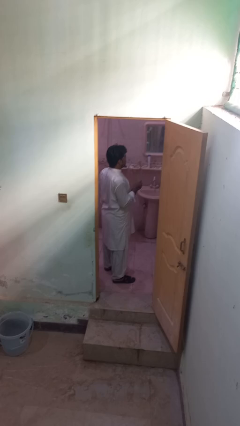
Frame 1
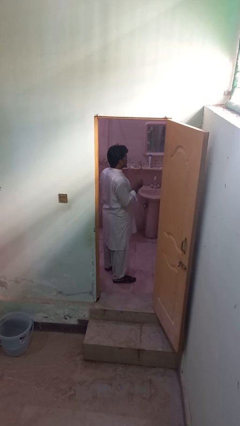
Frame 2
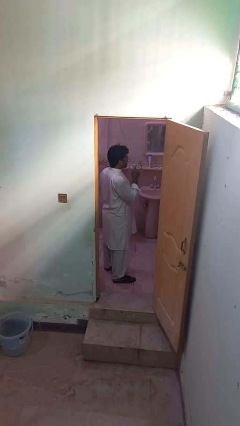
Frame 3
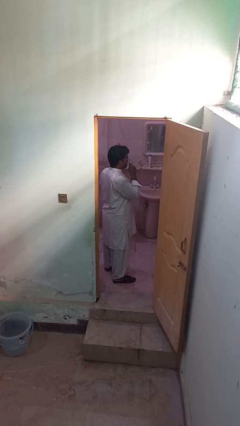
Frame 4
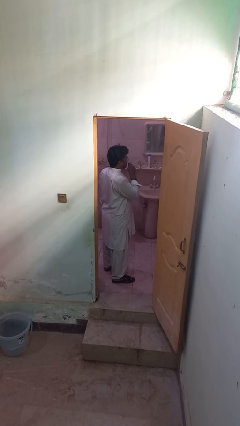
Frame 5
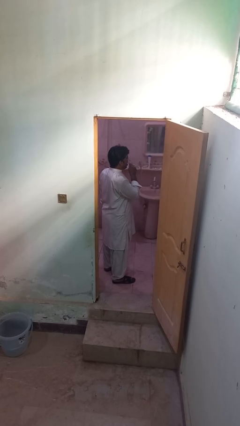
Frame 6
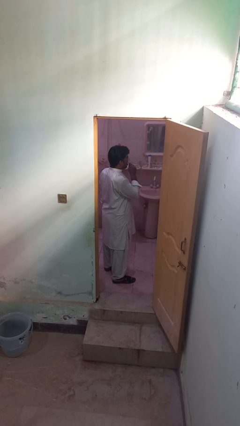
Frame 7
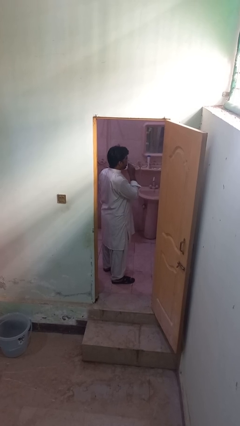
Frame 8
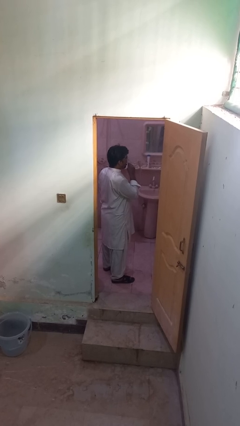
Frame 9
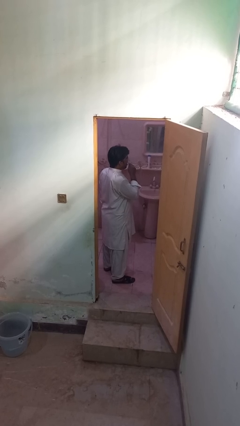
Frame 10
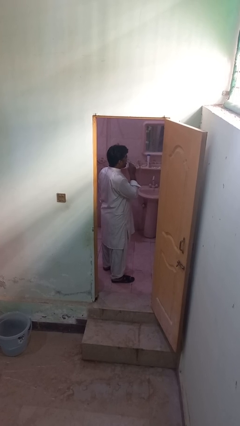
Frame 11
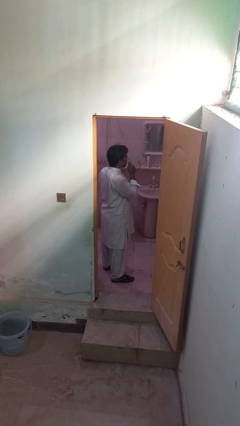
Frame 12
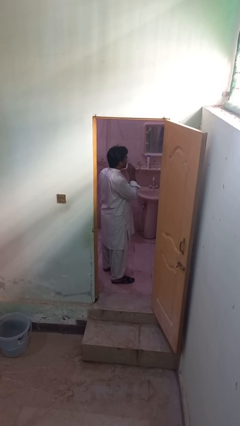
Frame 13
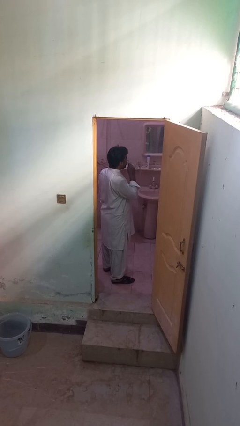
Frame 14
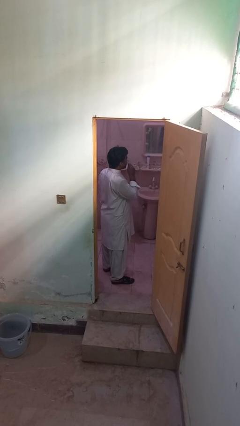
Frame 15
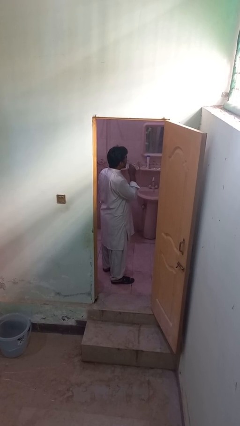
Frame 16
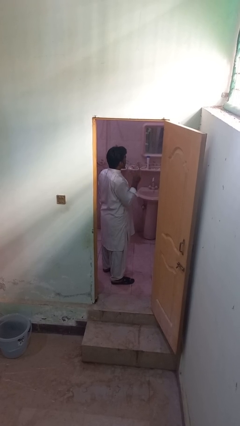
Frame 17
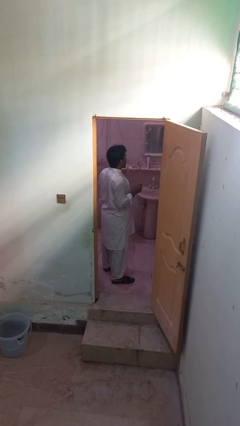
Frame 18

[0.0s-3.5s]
person flosses

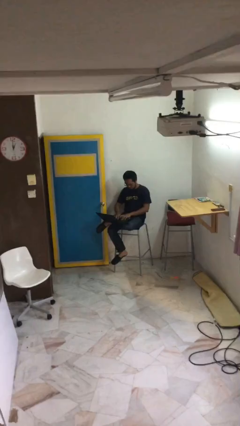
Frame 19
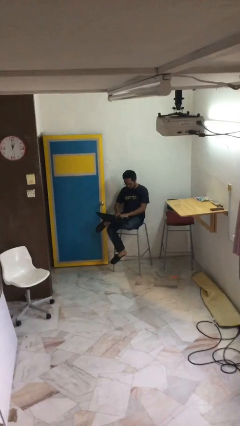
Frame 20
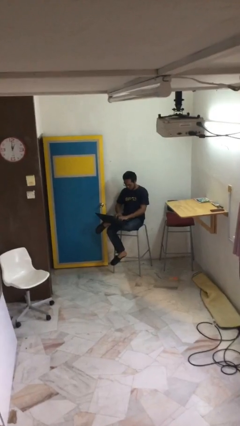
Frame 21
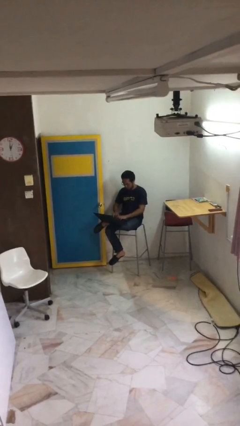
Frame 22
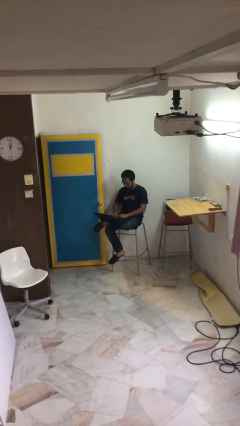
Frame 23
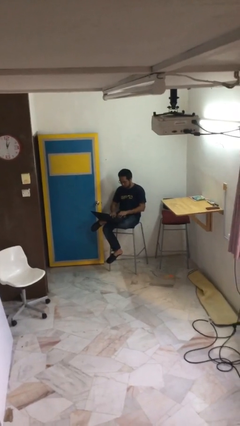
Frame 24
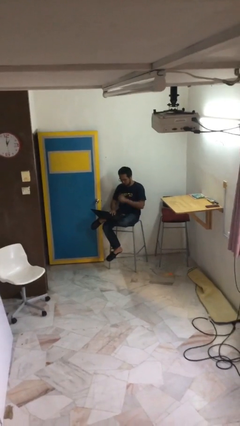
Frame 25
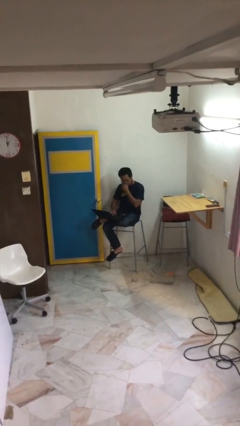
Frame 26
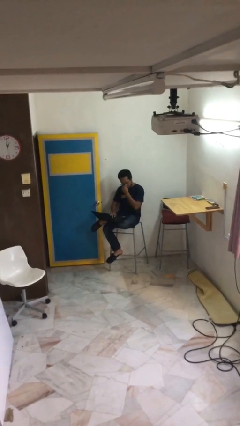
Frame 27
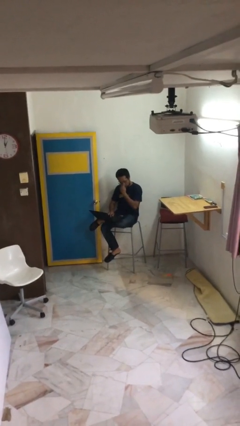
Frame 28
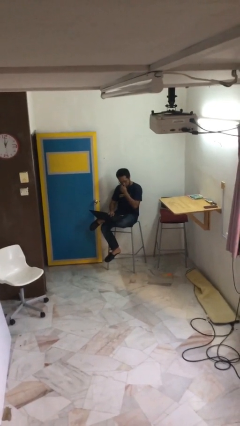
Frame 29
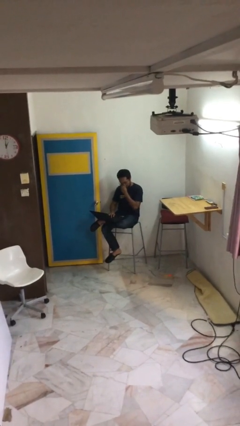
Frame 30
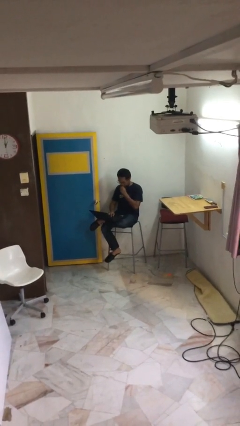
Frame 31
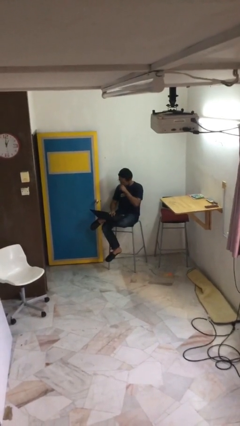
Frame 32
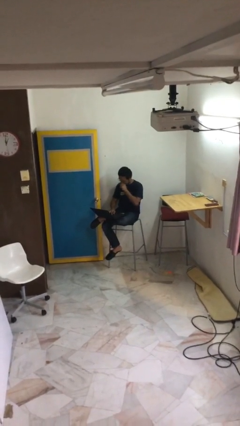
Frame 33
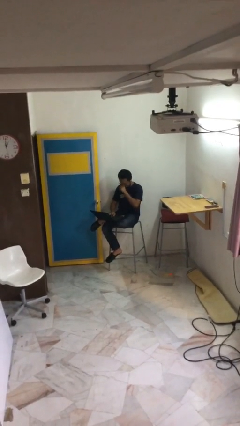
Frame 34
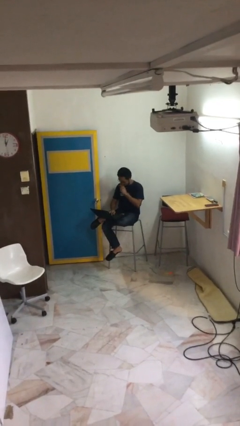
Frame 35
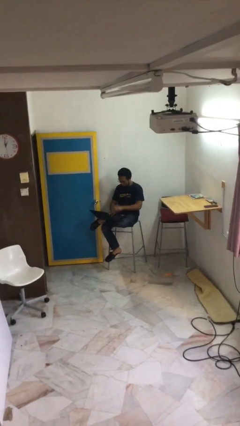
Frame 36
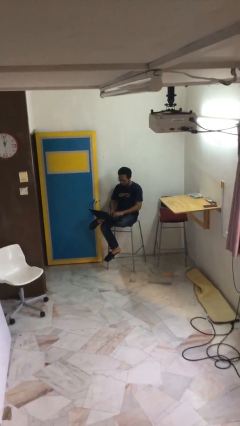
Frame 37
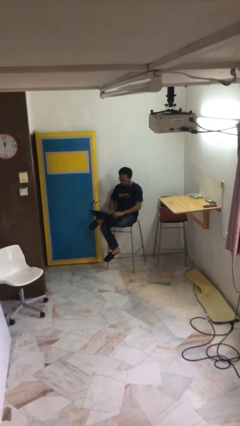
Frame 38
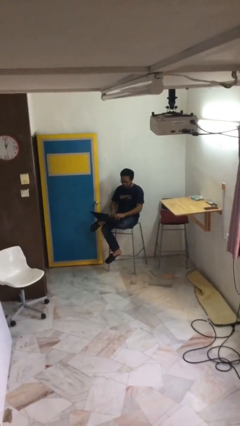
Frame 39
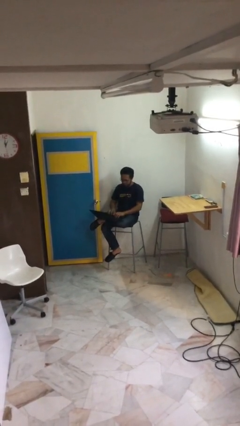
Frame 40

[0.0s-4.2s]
person interacts with laptop

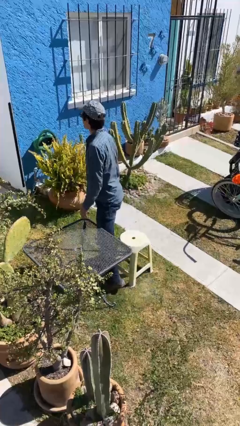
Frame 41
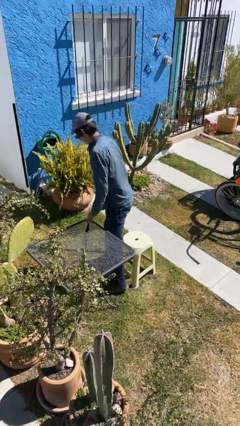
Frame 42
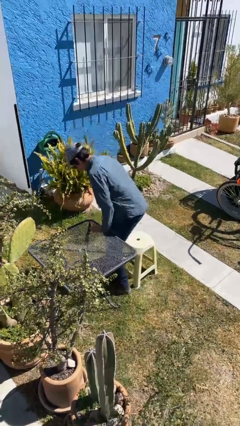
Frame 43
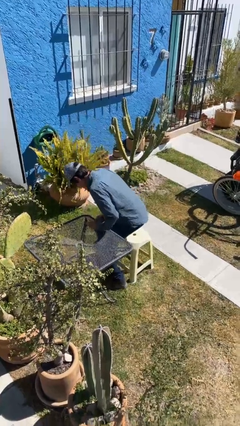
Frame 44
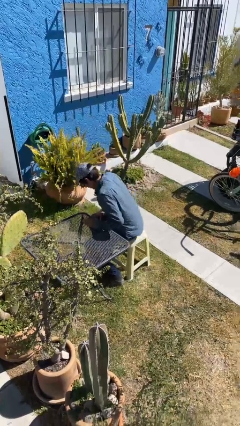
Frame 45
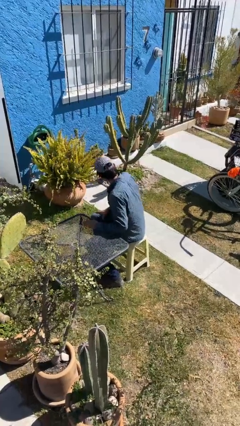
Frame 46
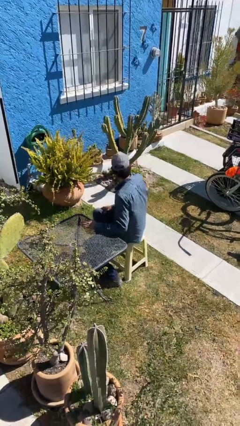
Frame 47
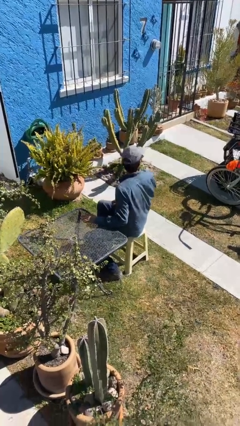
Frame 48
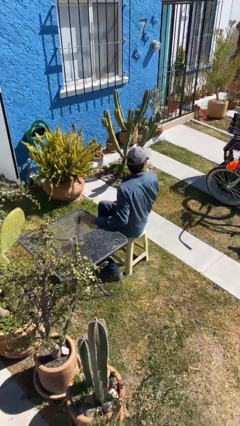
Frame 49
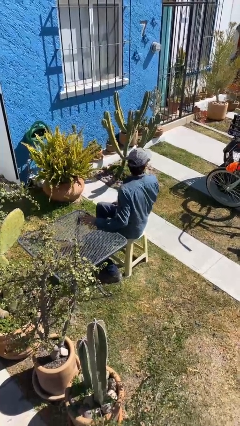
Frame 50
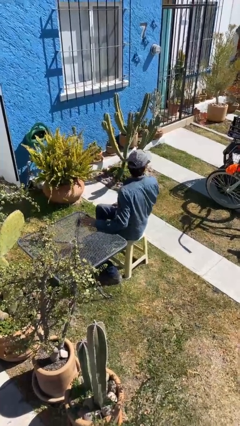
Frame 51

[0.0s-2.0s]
person sits down

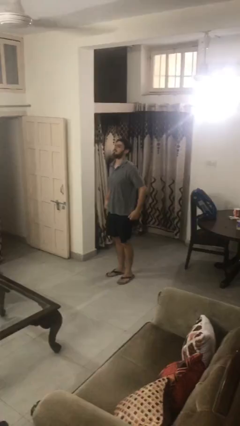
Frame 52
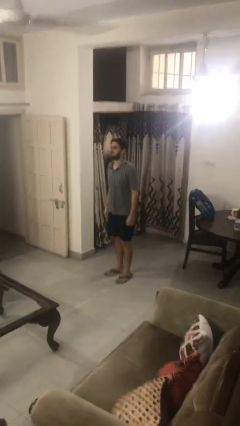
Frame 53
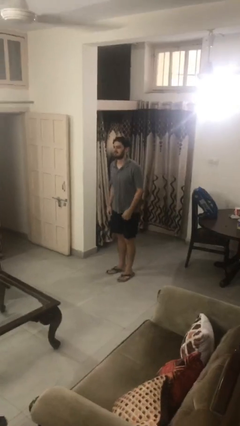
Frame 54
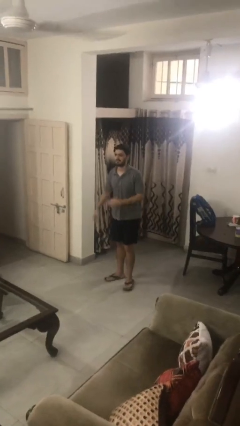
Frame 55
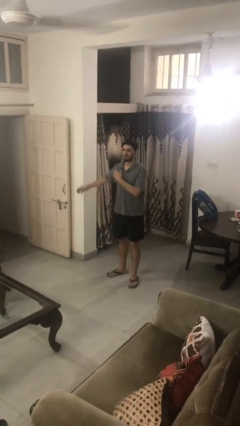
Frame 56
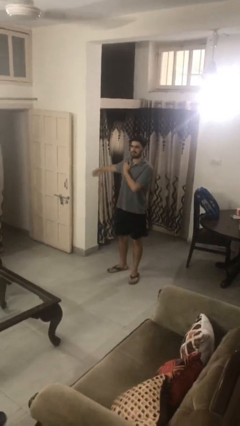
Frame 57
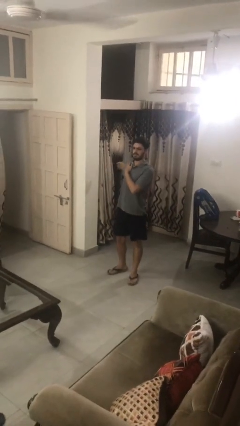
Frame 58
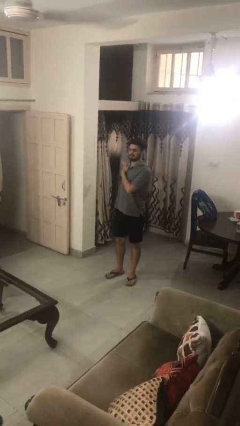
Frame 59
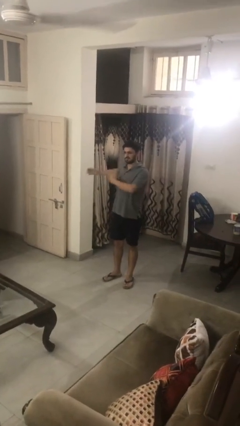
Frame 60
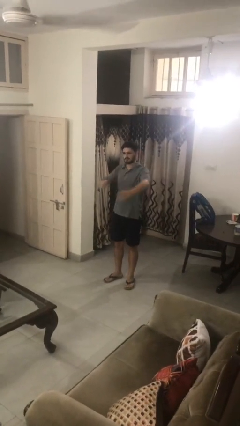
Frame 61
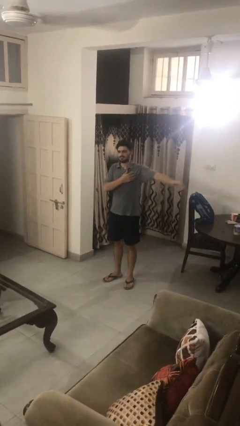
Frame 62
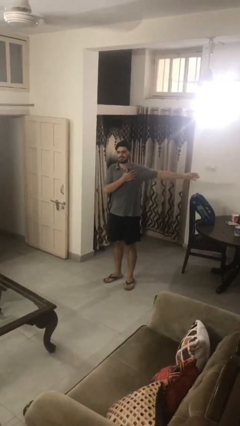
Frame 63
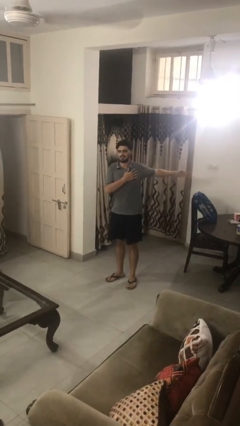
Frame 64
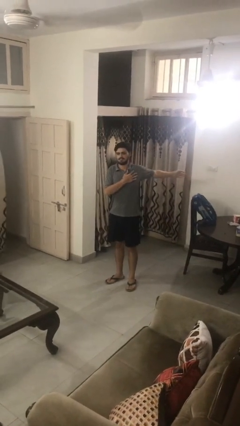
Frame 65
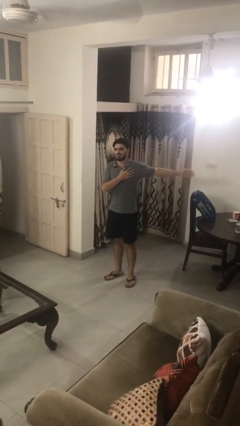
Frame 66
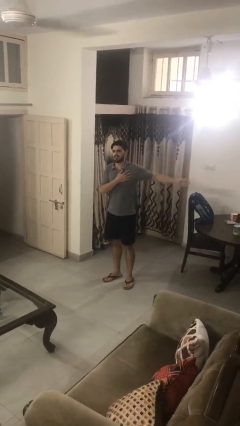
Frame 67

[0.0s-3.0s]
person stretches arms to side

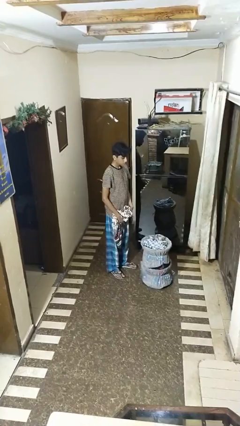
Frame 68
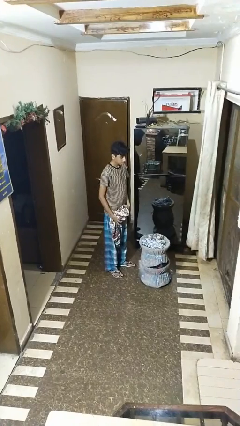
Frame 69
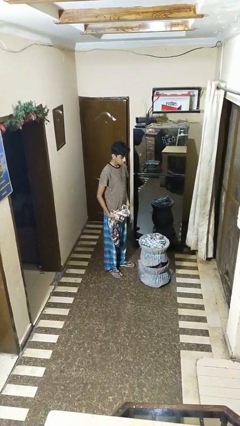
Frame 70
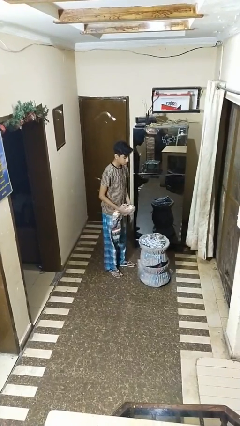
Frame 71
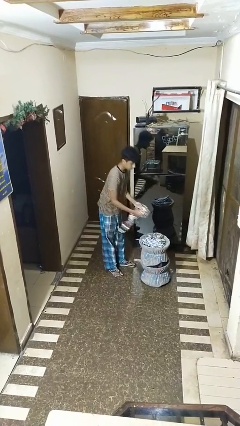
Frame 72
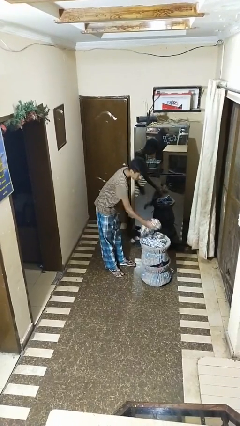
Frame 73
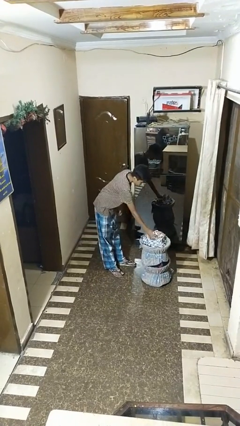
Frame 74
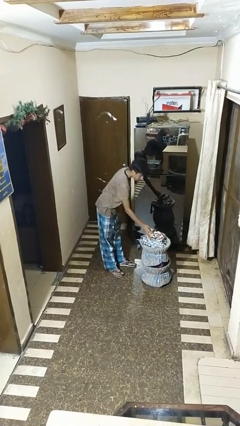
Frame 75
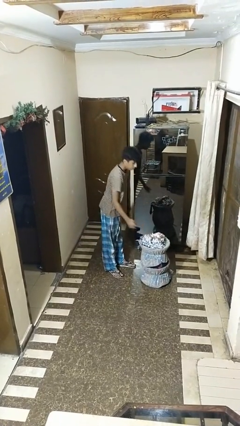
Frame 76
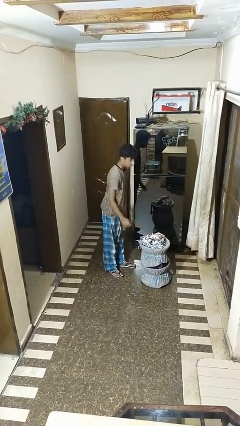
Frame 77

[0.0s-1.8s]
person puts object into basket

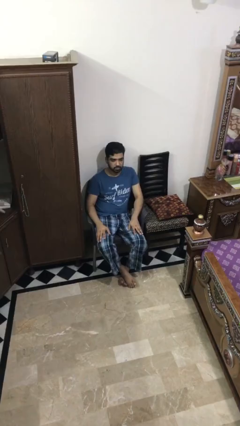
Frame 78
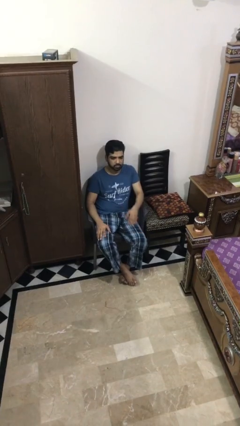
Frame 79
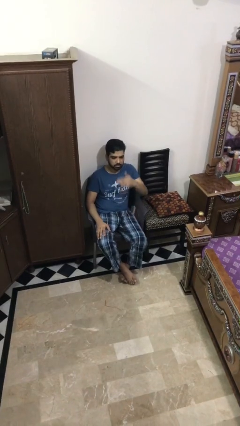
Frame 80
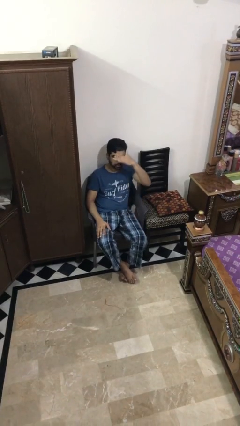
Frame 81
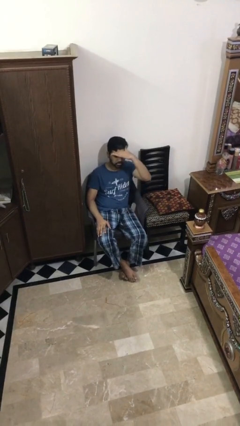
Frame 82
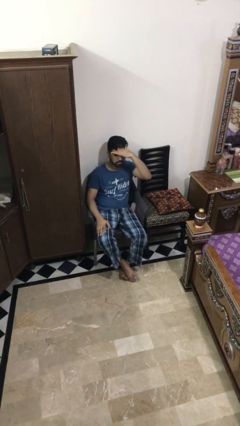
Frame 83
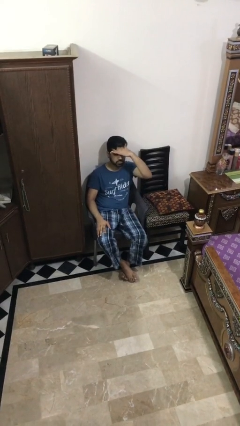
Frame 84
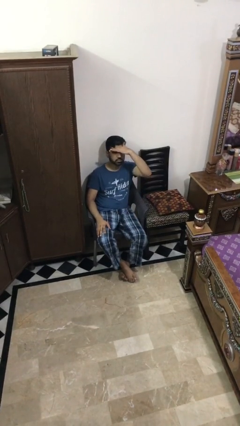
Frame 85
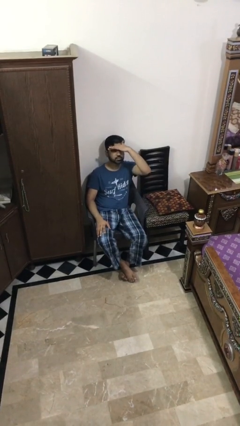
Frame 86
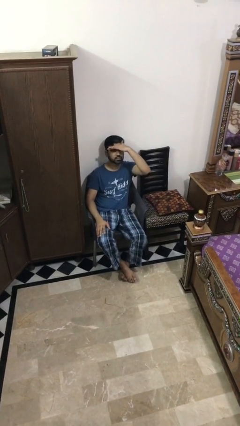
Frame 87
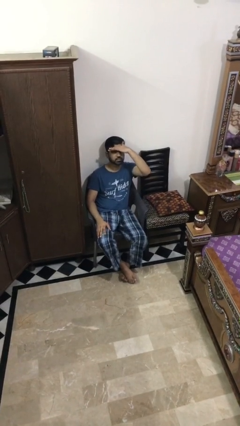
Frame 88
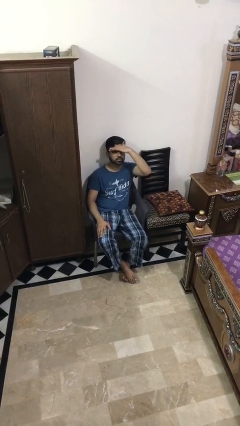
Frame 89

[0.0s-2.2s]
person shades eyes

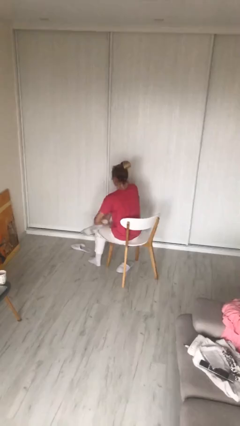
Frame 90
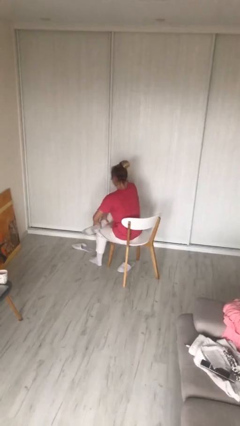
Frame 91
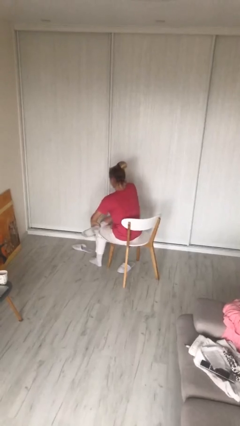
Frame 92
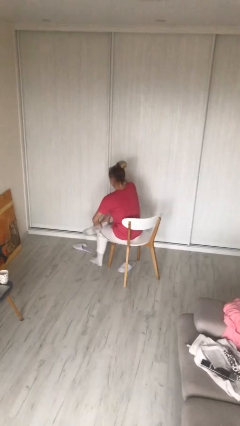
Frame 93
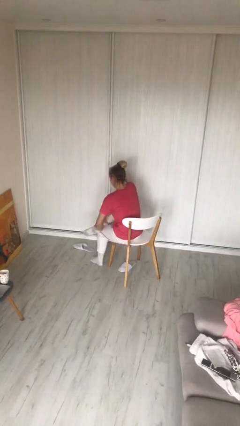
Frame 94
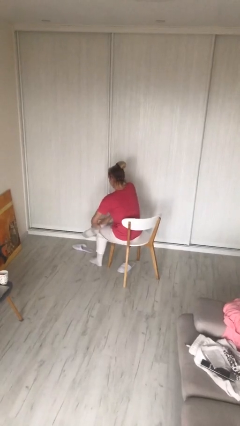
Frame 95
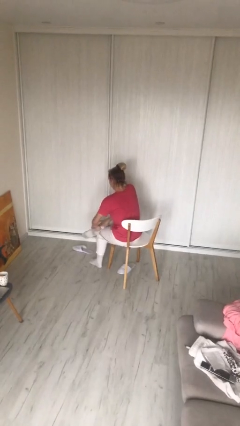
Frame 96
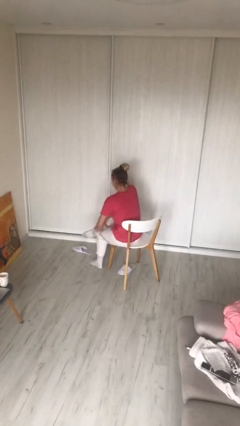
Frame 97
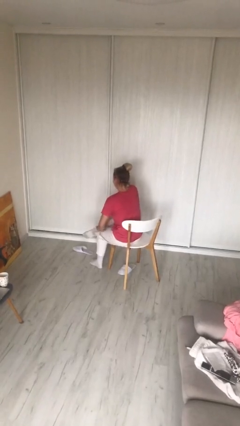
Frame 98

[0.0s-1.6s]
person rubs foot
